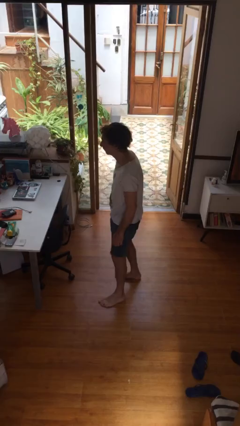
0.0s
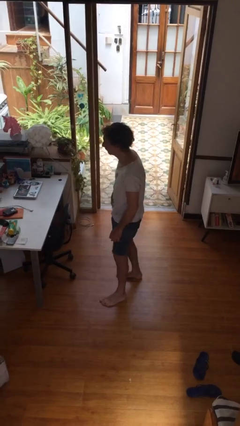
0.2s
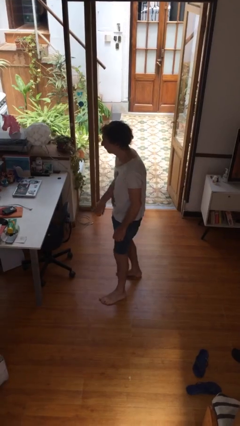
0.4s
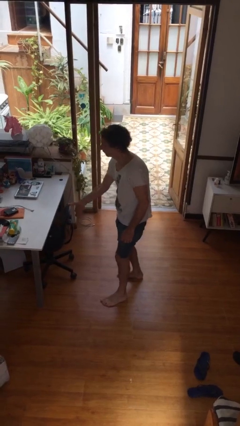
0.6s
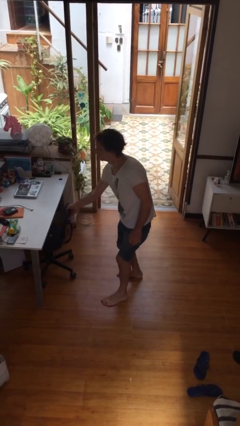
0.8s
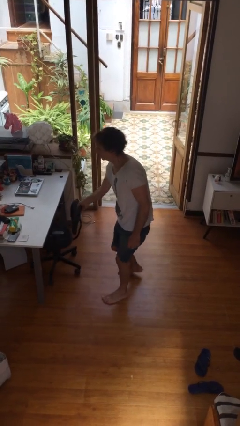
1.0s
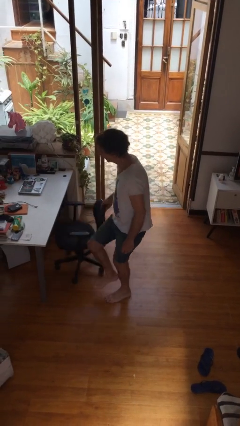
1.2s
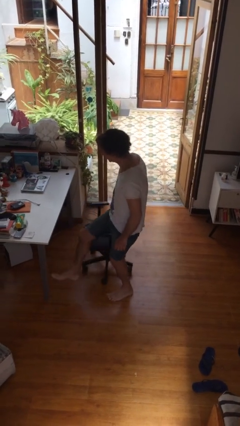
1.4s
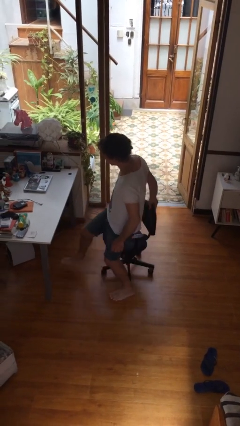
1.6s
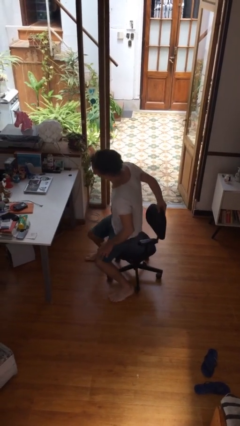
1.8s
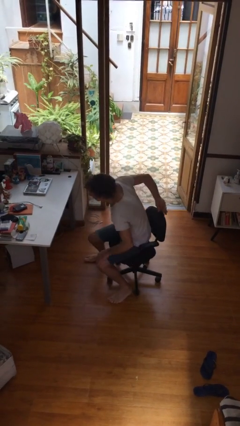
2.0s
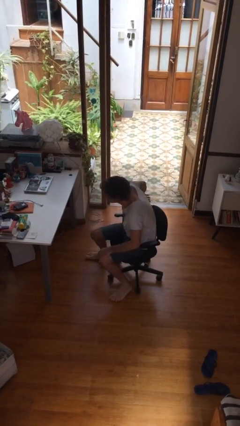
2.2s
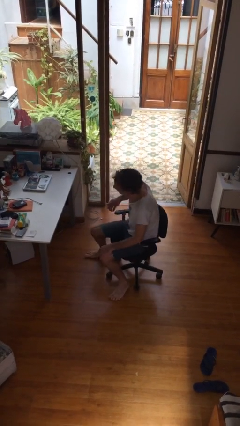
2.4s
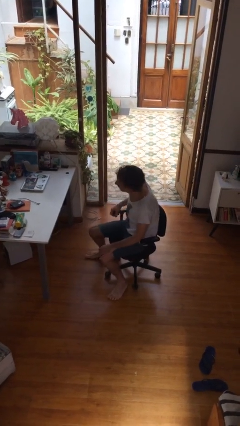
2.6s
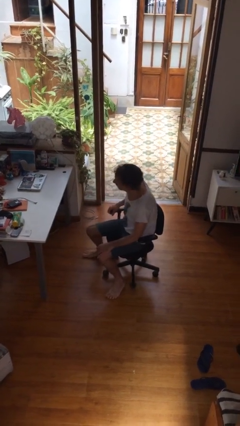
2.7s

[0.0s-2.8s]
person sits down

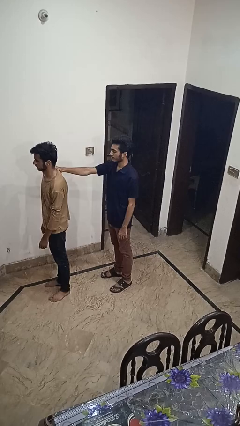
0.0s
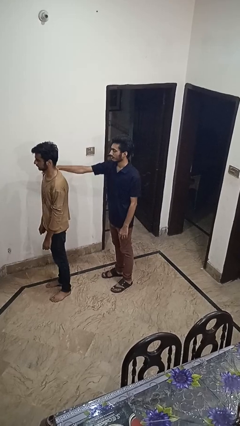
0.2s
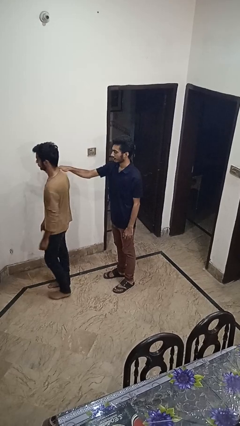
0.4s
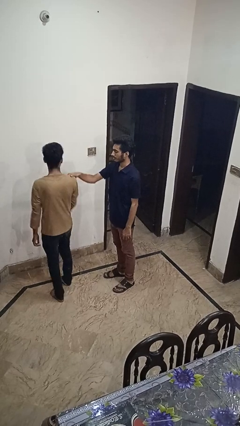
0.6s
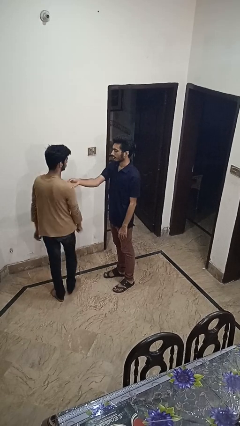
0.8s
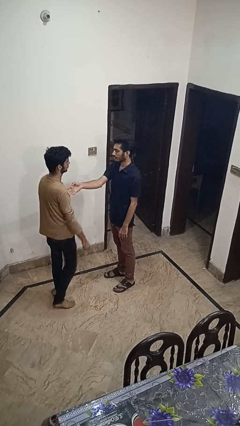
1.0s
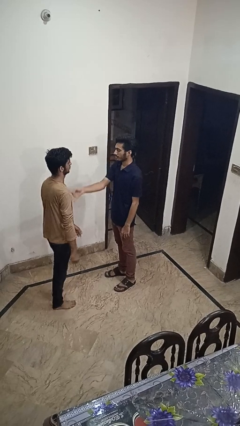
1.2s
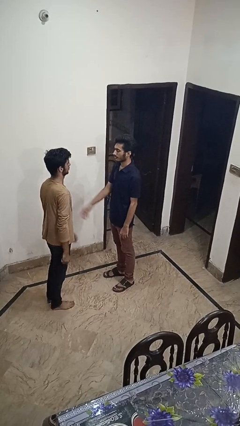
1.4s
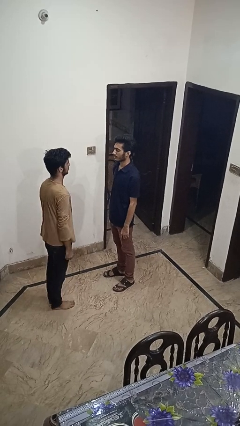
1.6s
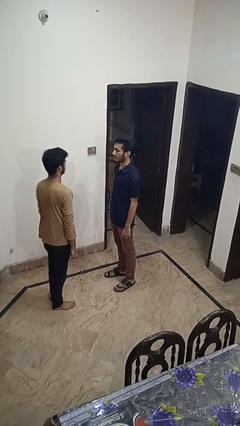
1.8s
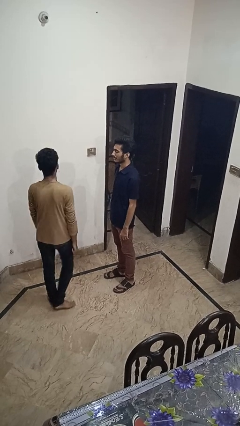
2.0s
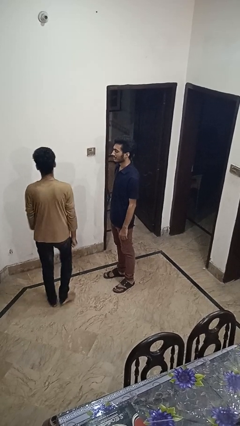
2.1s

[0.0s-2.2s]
person spins person around

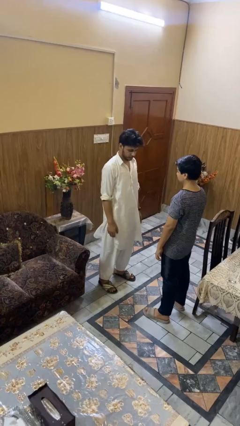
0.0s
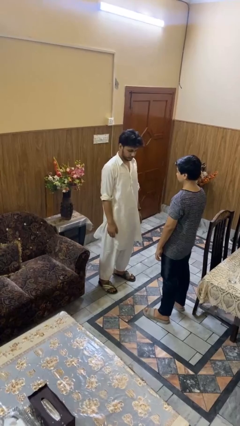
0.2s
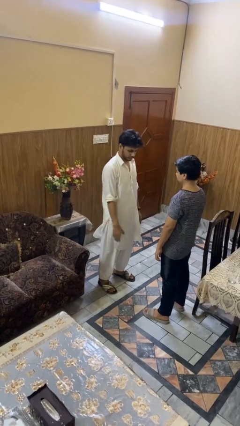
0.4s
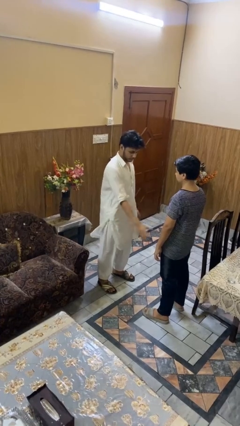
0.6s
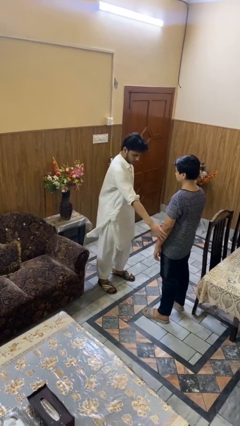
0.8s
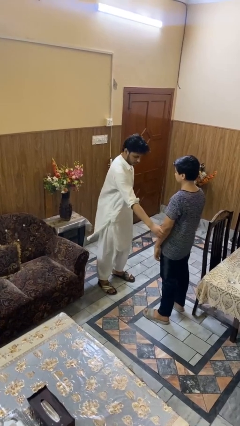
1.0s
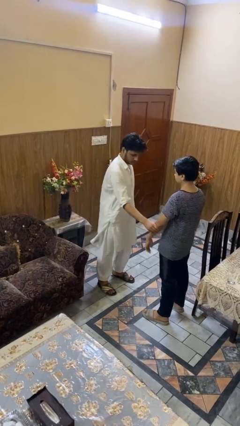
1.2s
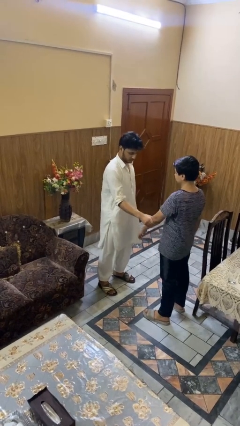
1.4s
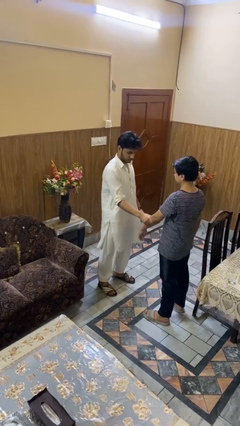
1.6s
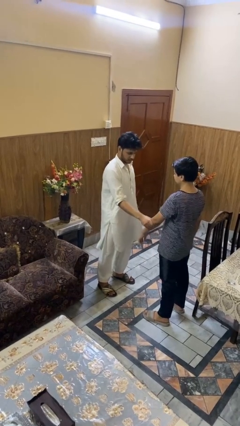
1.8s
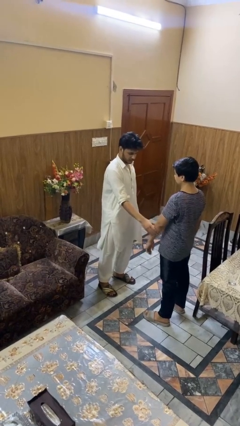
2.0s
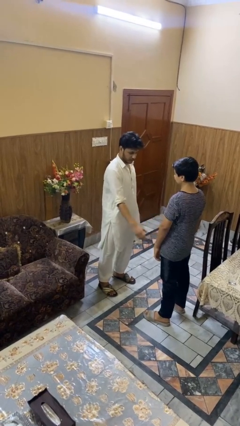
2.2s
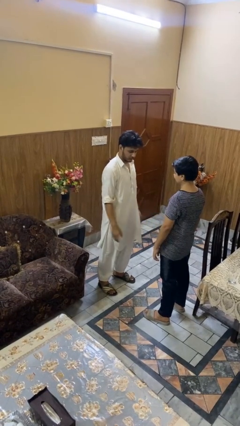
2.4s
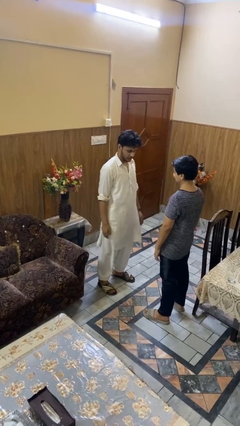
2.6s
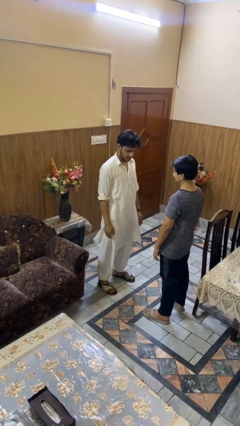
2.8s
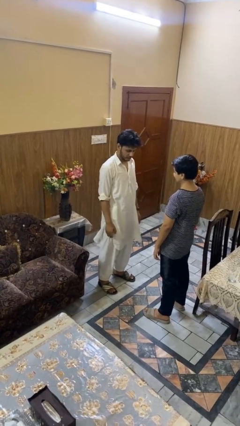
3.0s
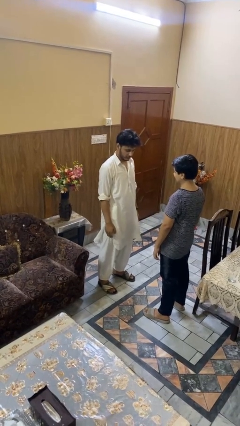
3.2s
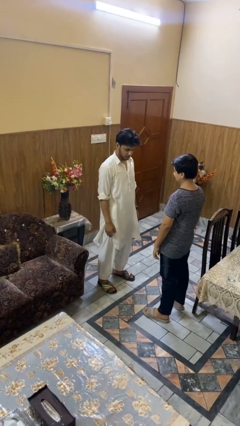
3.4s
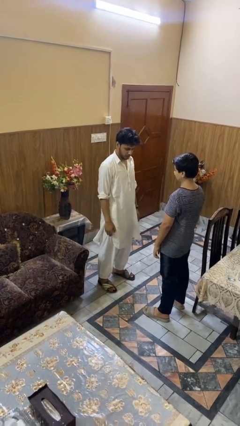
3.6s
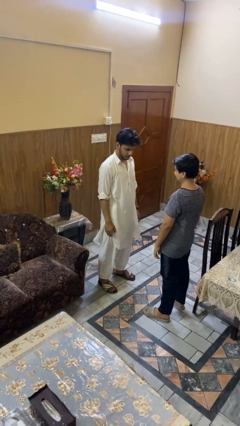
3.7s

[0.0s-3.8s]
person grabs person by forearm

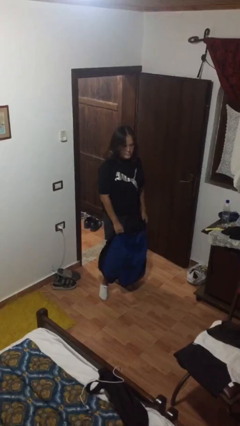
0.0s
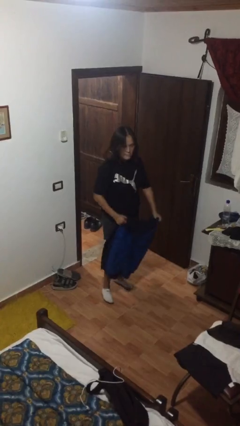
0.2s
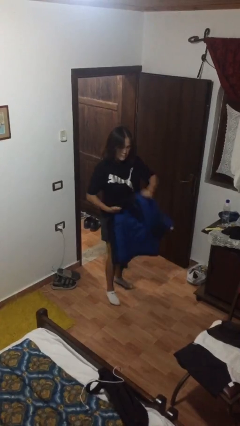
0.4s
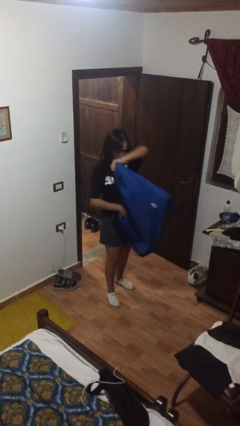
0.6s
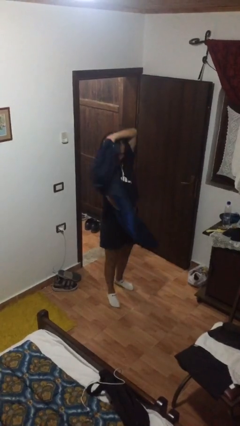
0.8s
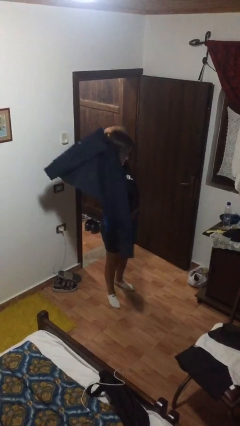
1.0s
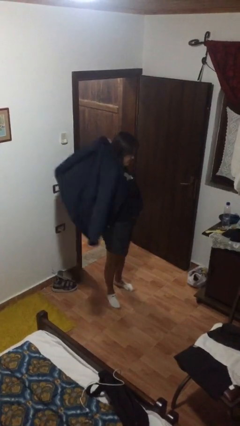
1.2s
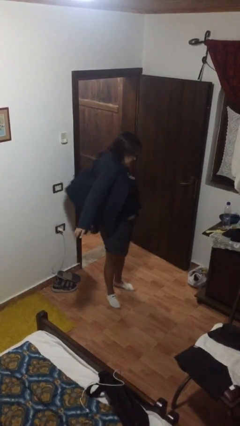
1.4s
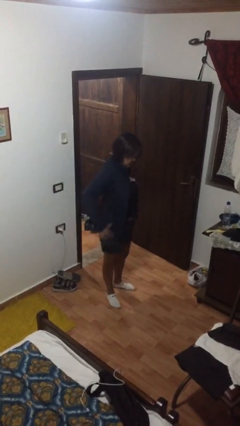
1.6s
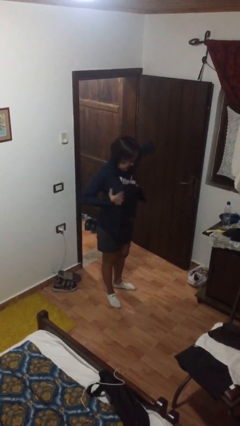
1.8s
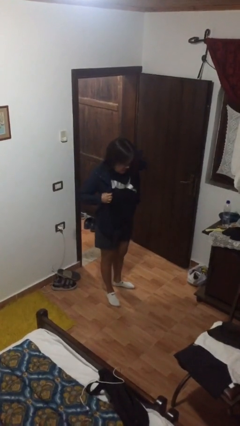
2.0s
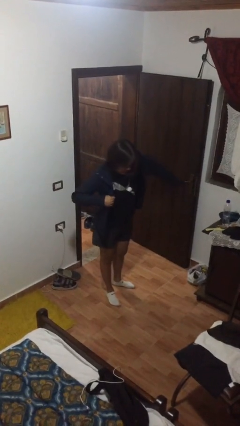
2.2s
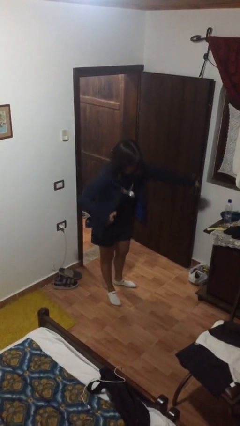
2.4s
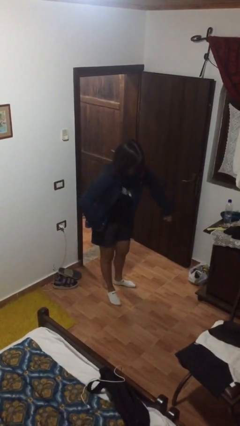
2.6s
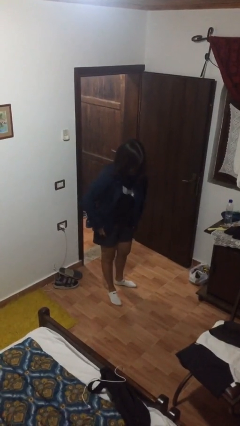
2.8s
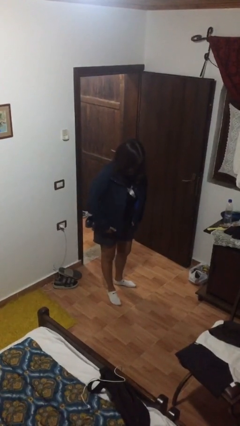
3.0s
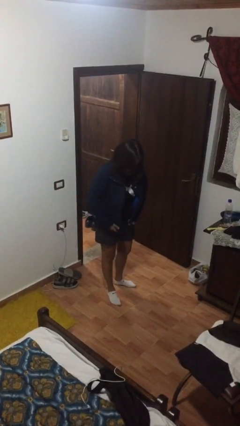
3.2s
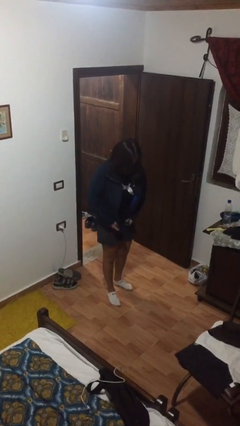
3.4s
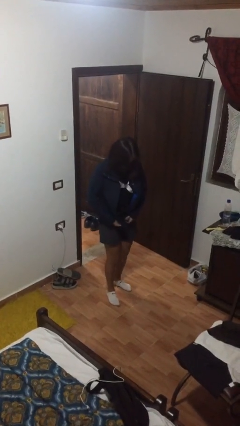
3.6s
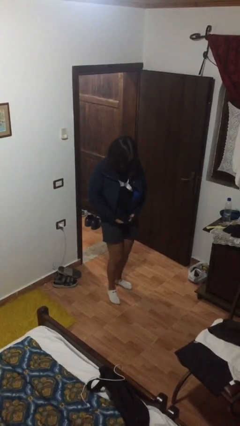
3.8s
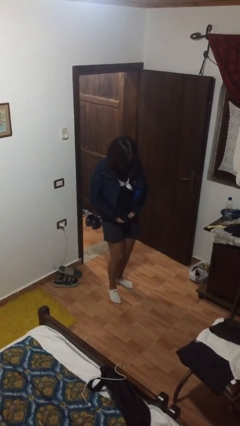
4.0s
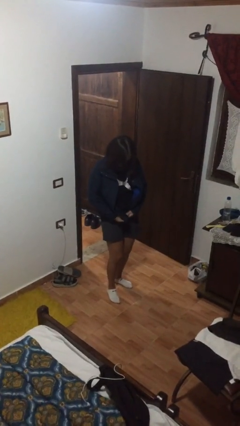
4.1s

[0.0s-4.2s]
person puts on jacket

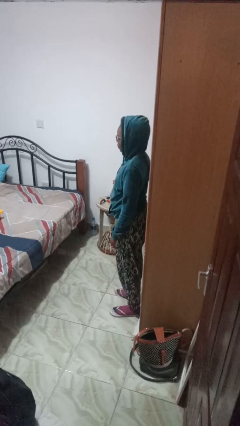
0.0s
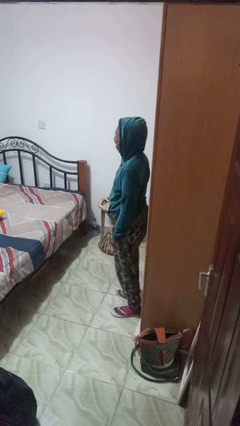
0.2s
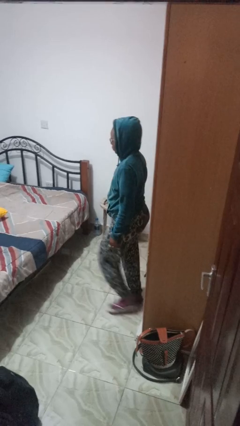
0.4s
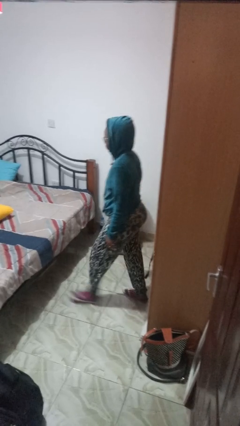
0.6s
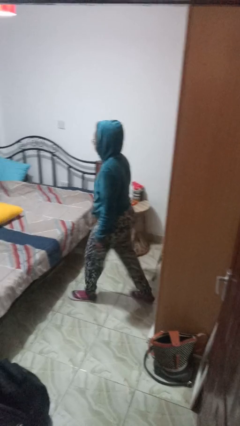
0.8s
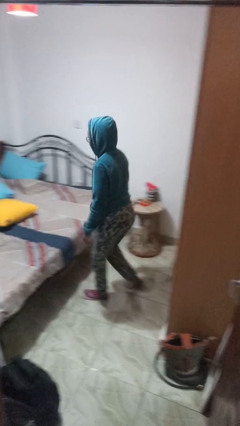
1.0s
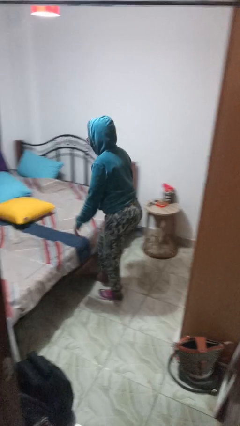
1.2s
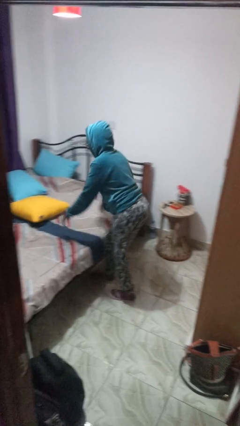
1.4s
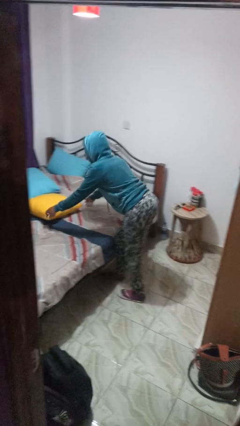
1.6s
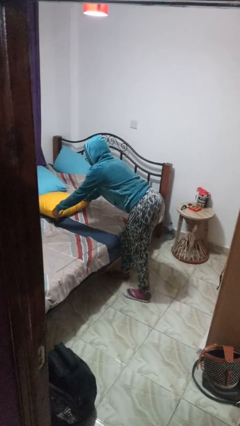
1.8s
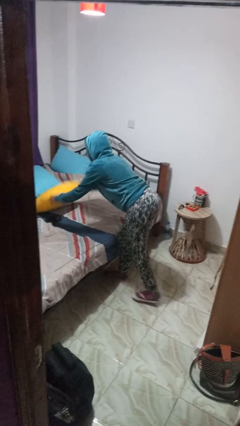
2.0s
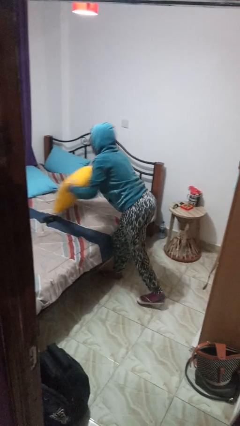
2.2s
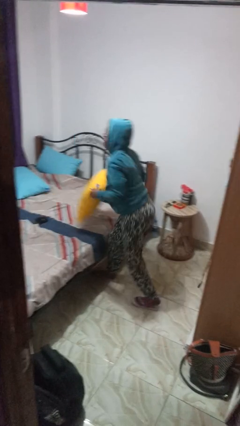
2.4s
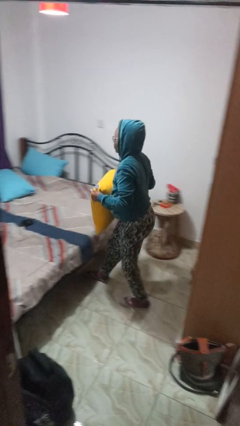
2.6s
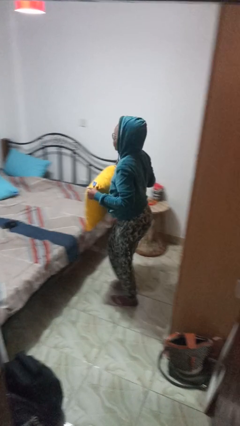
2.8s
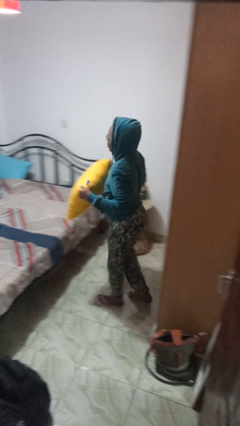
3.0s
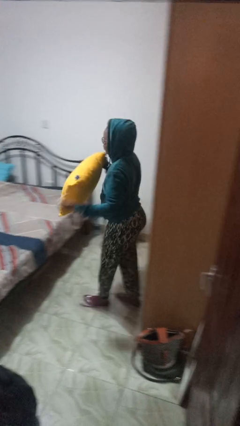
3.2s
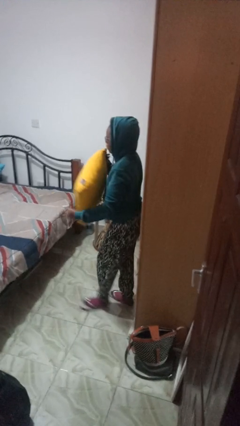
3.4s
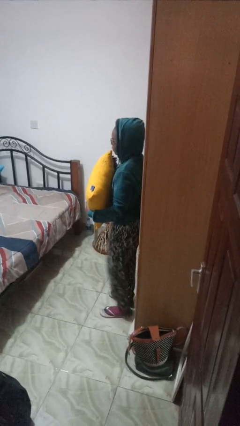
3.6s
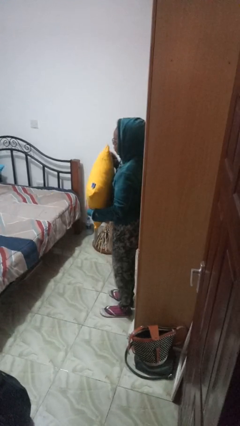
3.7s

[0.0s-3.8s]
person picks up object from bed

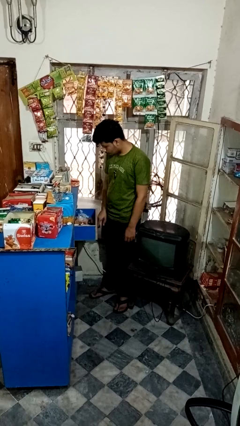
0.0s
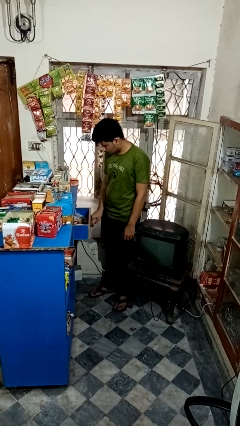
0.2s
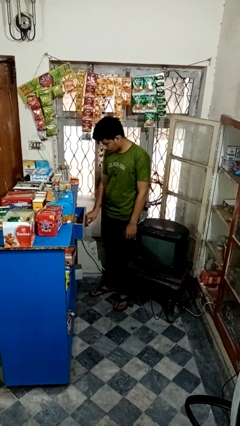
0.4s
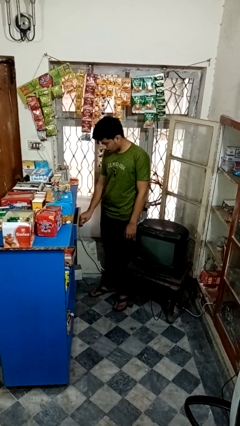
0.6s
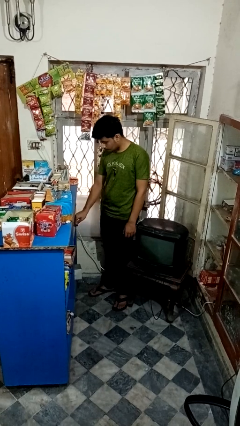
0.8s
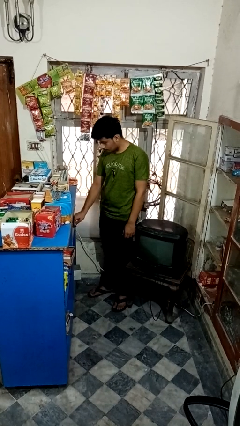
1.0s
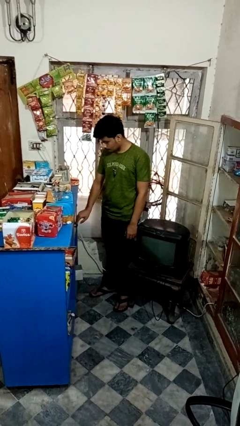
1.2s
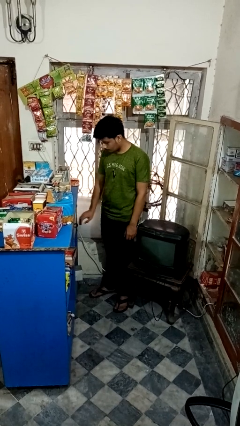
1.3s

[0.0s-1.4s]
person closes kitchen drawer
